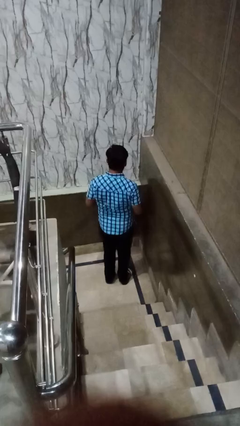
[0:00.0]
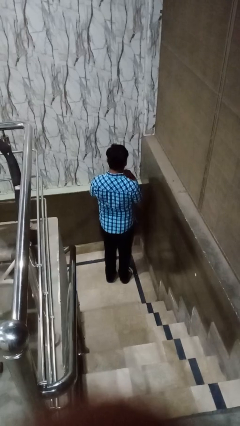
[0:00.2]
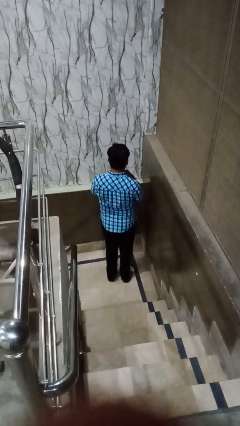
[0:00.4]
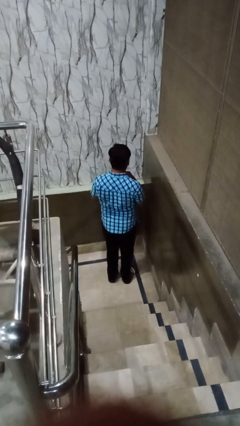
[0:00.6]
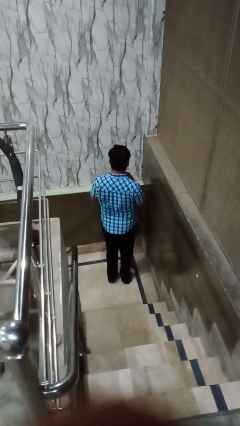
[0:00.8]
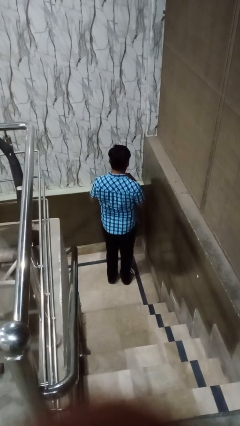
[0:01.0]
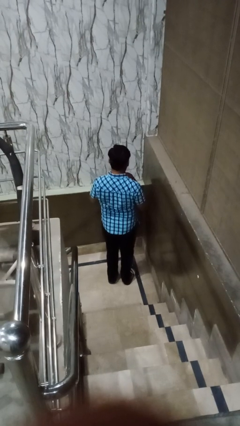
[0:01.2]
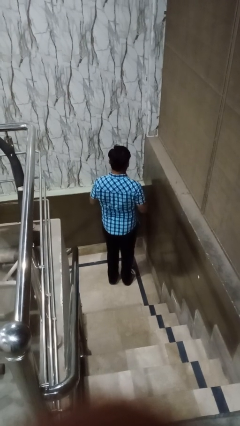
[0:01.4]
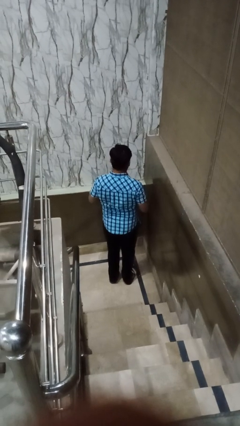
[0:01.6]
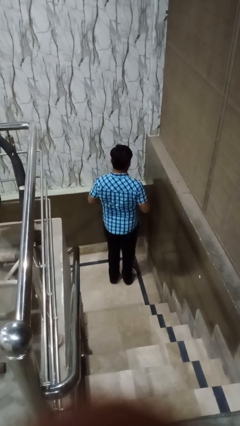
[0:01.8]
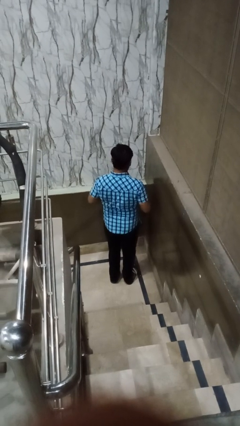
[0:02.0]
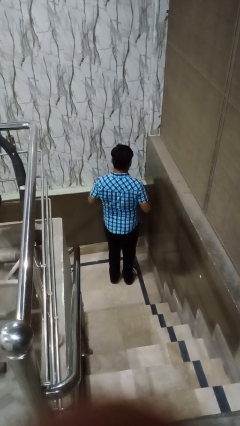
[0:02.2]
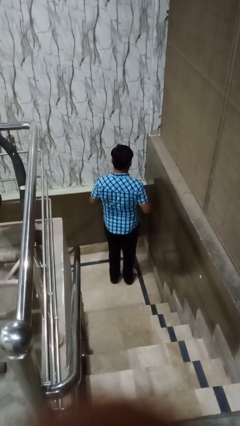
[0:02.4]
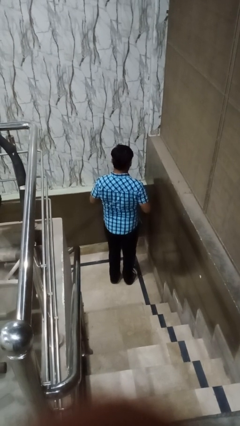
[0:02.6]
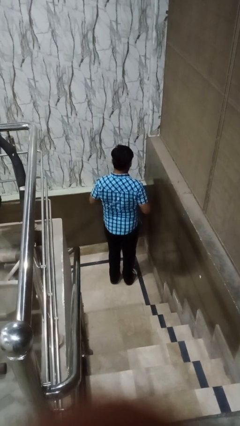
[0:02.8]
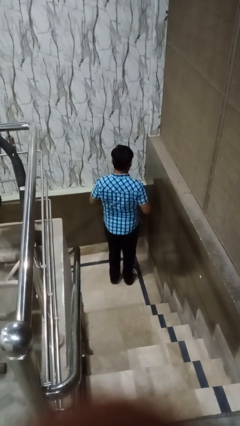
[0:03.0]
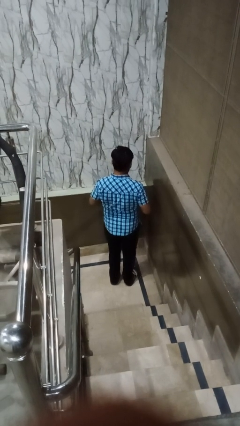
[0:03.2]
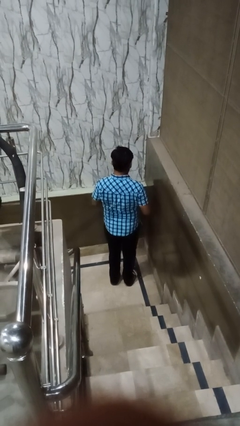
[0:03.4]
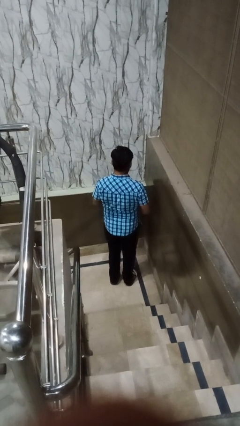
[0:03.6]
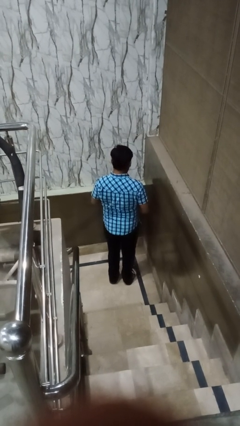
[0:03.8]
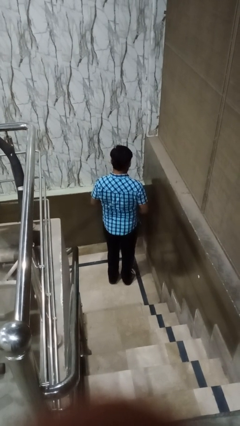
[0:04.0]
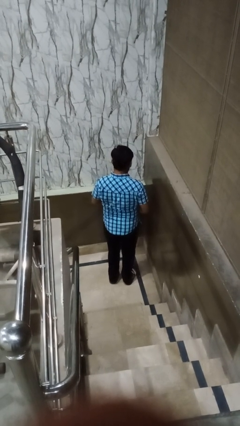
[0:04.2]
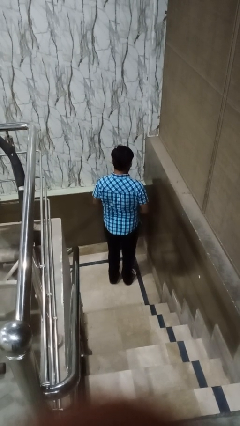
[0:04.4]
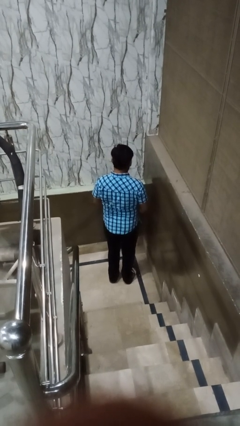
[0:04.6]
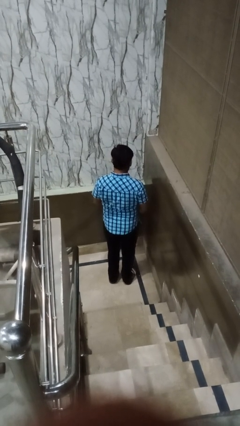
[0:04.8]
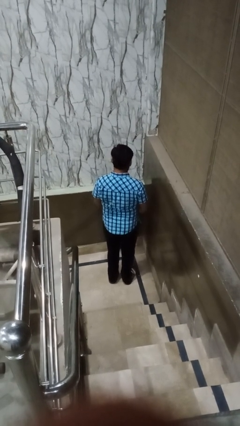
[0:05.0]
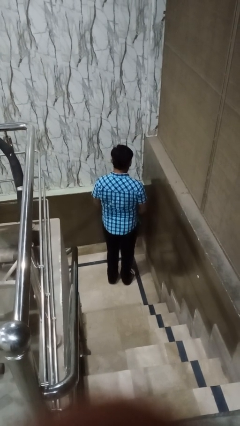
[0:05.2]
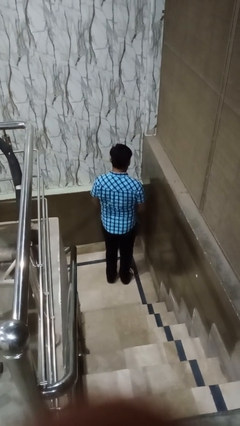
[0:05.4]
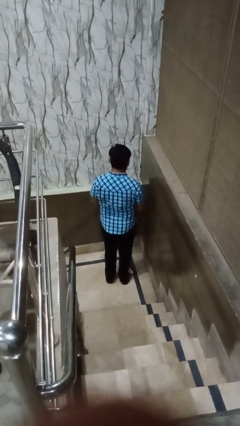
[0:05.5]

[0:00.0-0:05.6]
person unbuttons shirt

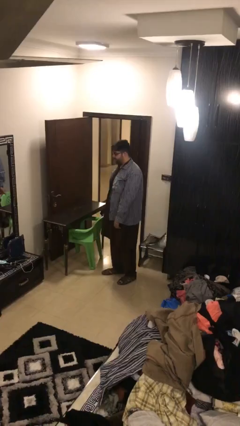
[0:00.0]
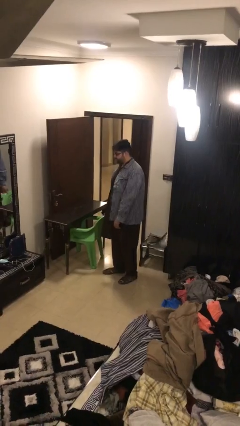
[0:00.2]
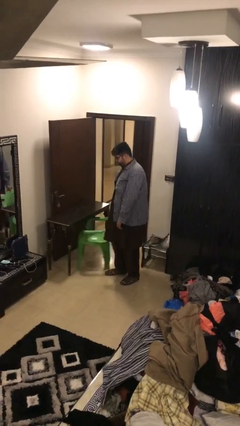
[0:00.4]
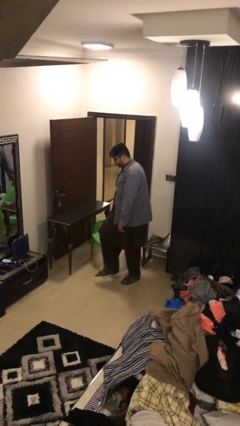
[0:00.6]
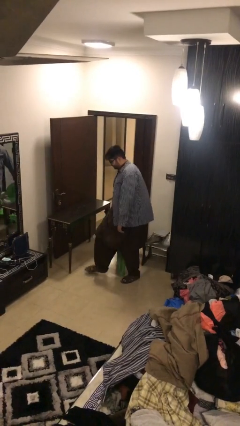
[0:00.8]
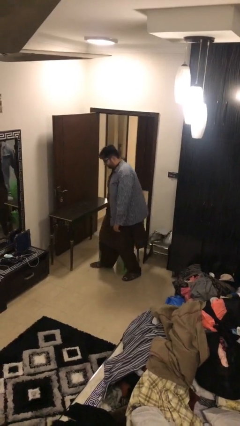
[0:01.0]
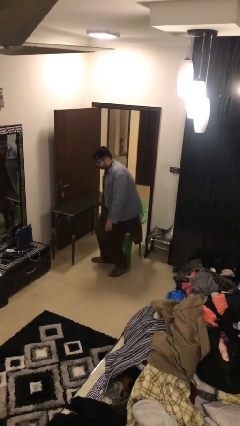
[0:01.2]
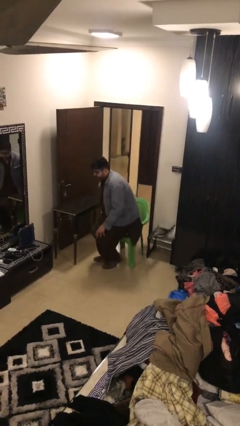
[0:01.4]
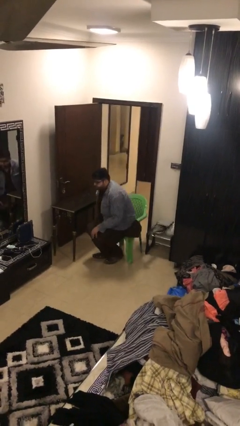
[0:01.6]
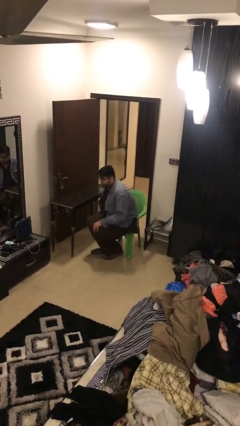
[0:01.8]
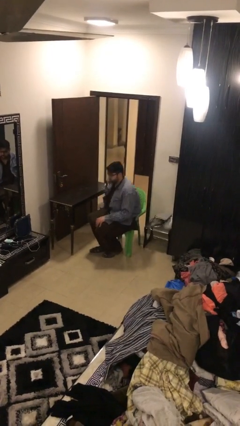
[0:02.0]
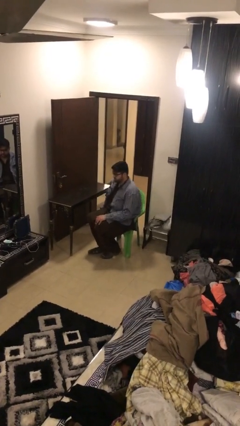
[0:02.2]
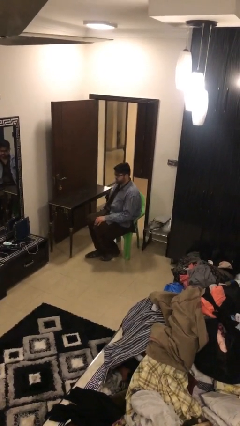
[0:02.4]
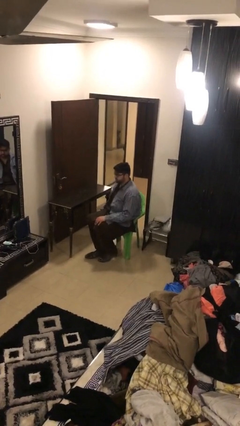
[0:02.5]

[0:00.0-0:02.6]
person sits down

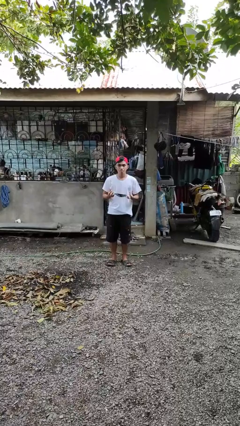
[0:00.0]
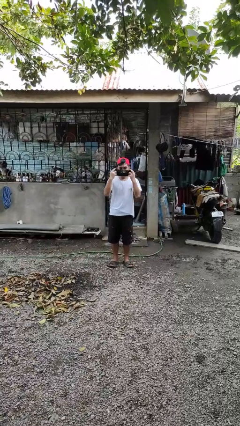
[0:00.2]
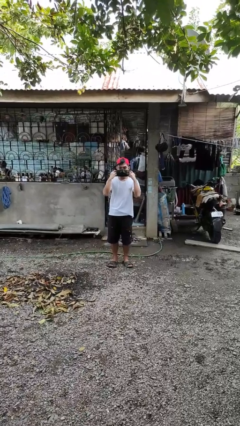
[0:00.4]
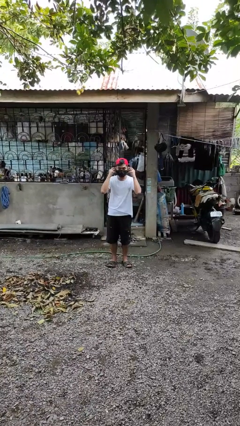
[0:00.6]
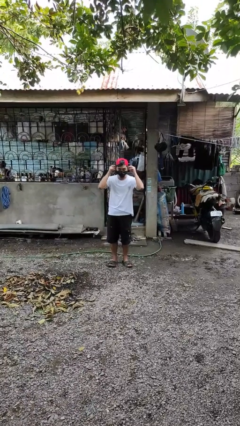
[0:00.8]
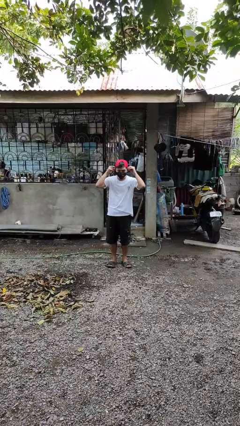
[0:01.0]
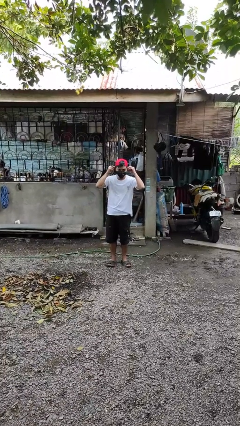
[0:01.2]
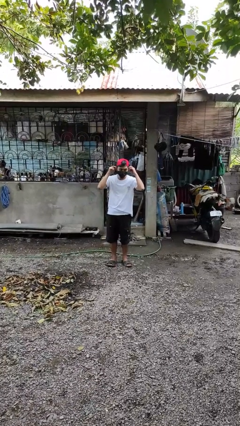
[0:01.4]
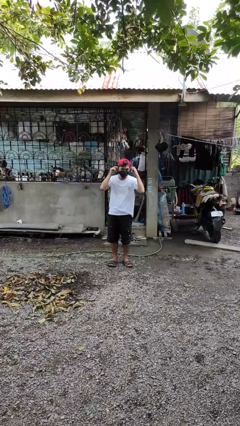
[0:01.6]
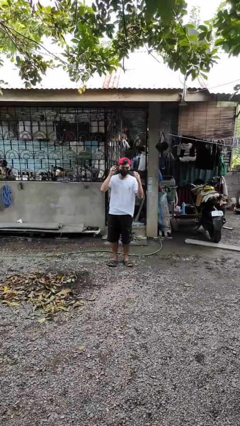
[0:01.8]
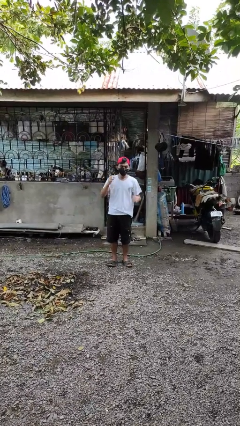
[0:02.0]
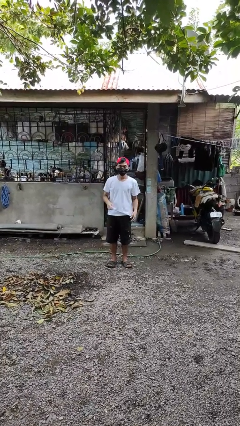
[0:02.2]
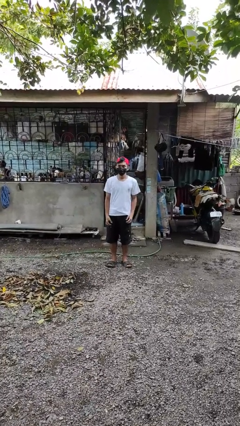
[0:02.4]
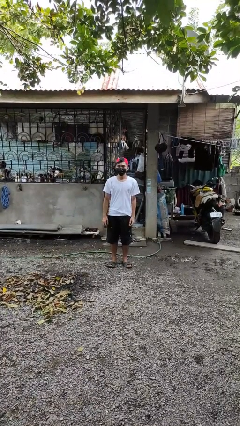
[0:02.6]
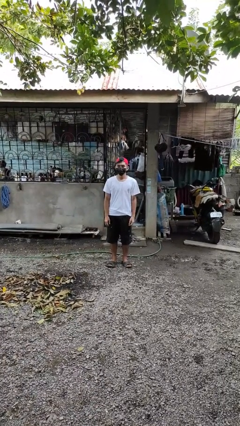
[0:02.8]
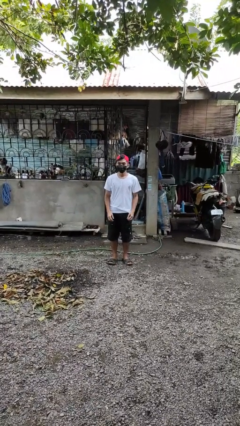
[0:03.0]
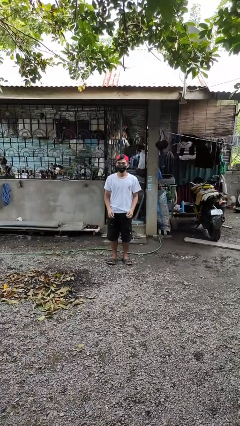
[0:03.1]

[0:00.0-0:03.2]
person puts on facemask

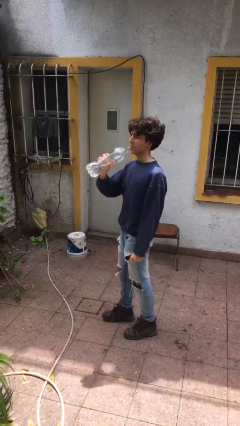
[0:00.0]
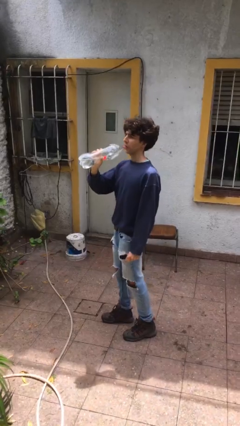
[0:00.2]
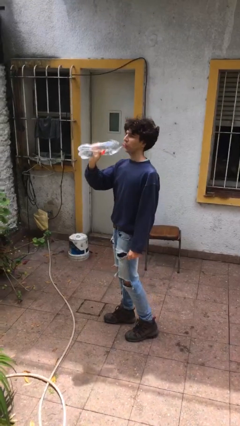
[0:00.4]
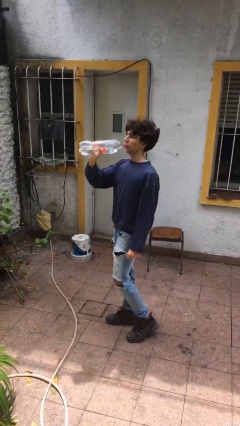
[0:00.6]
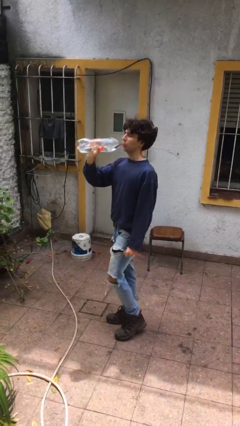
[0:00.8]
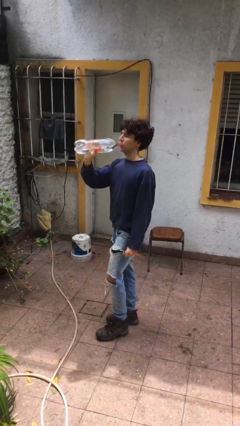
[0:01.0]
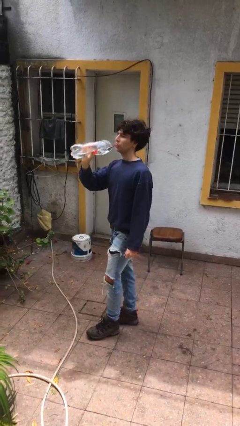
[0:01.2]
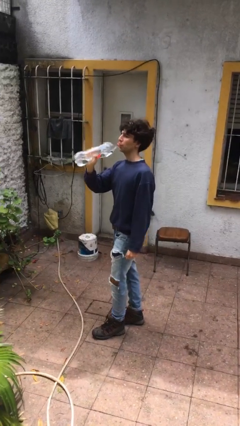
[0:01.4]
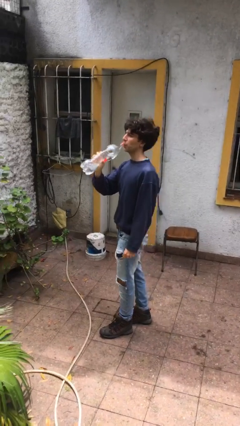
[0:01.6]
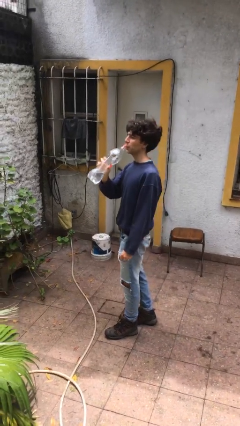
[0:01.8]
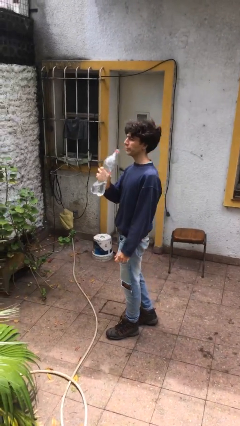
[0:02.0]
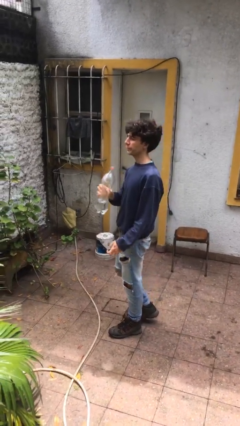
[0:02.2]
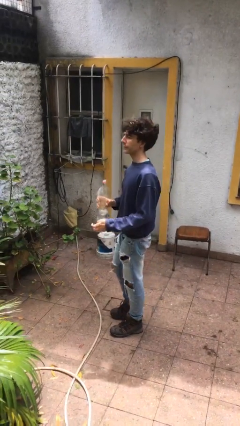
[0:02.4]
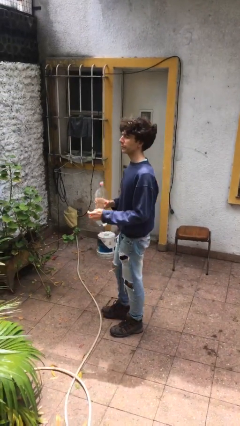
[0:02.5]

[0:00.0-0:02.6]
person drinks from bottle

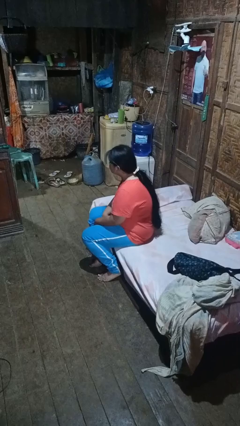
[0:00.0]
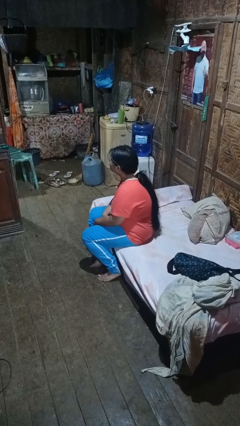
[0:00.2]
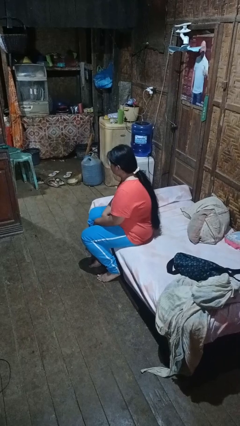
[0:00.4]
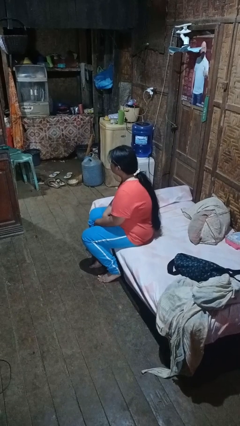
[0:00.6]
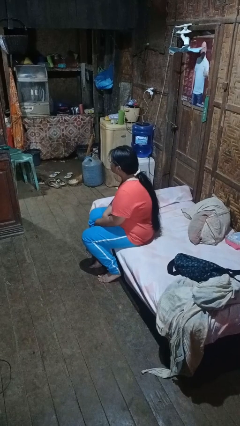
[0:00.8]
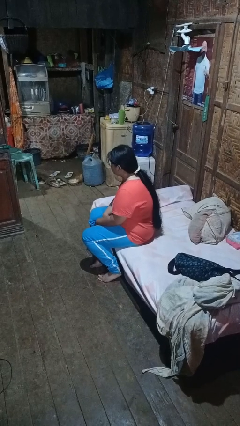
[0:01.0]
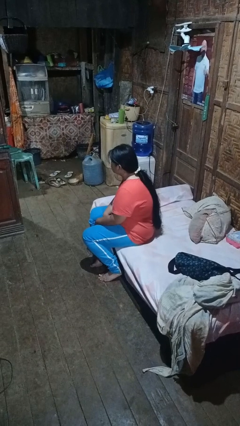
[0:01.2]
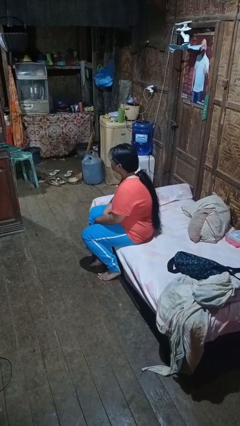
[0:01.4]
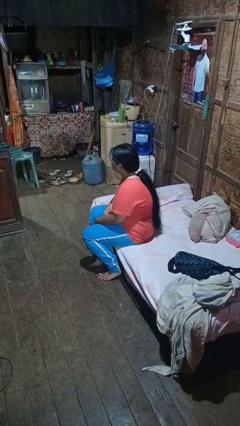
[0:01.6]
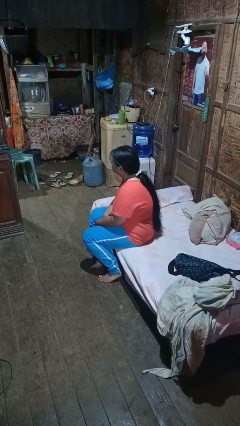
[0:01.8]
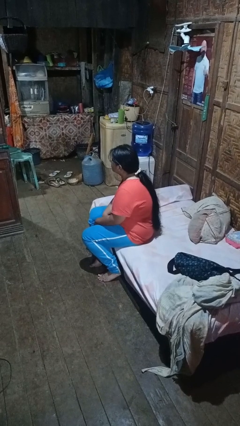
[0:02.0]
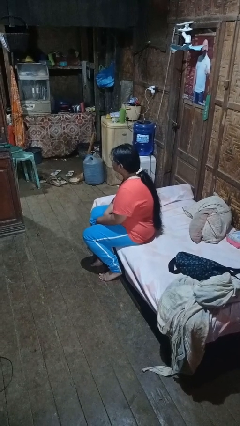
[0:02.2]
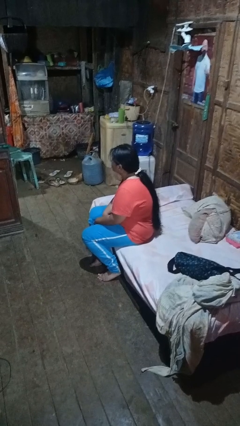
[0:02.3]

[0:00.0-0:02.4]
person nods head

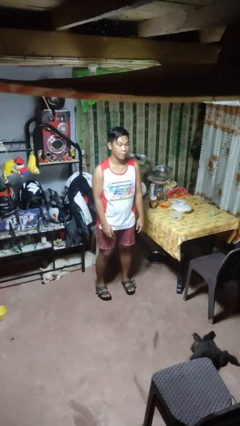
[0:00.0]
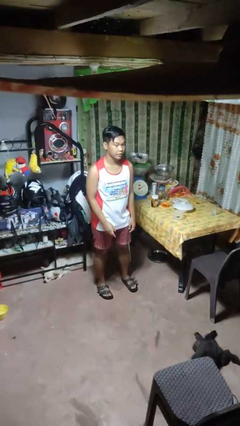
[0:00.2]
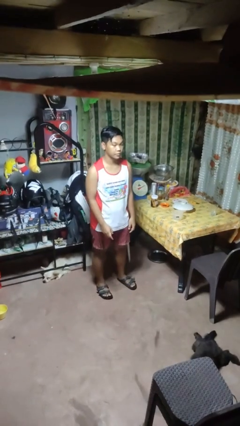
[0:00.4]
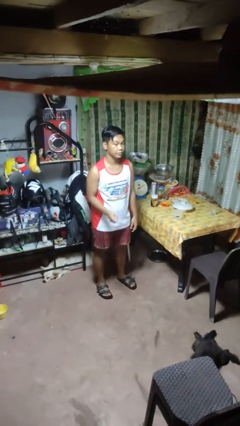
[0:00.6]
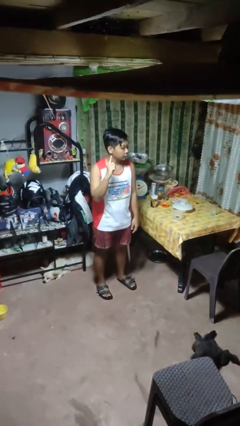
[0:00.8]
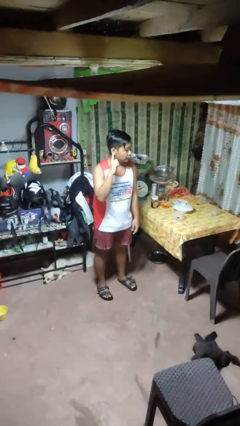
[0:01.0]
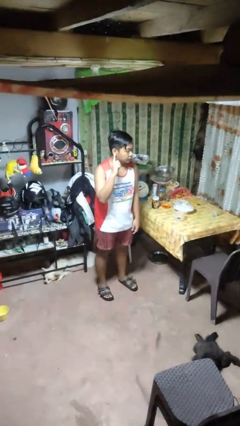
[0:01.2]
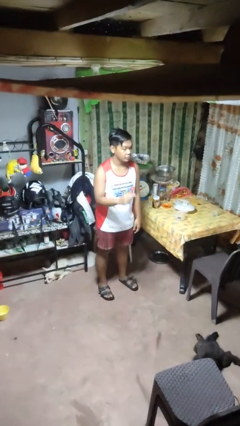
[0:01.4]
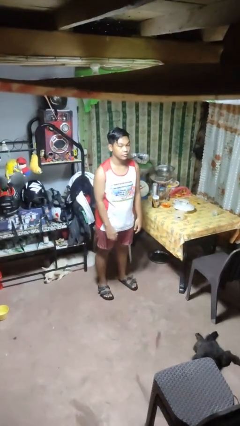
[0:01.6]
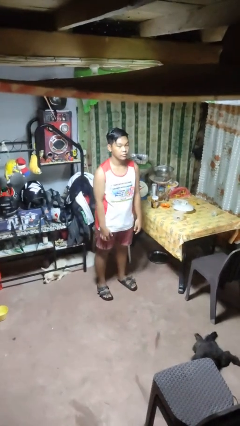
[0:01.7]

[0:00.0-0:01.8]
person gestures listen closely
